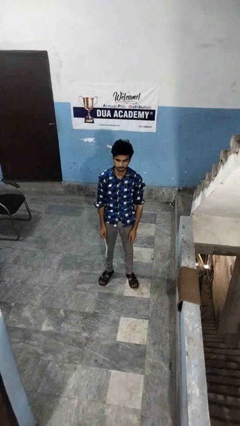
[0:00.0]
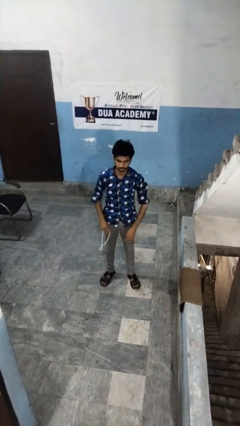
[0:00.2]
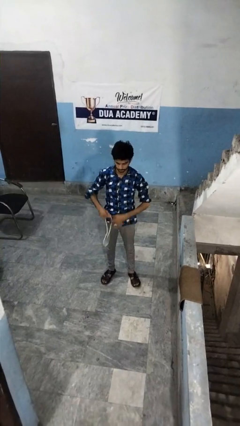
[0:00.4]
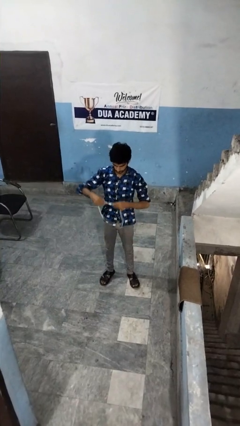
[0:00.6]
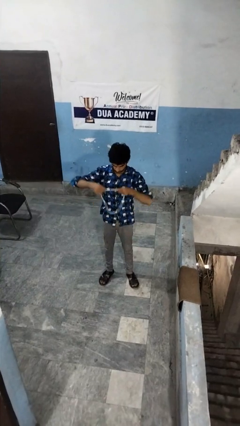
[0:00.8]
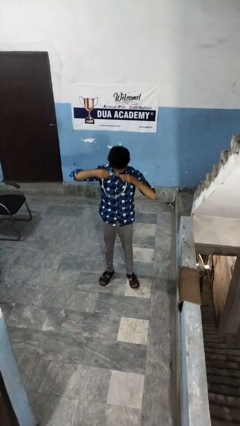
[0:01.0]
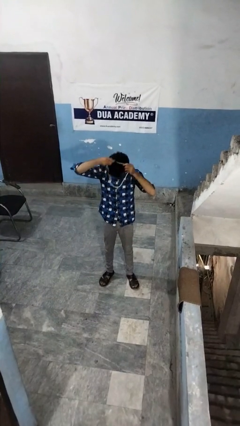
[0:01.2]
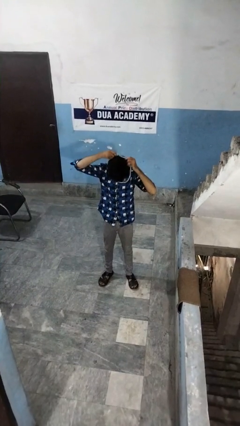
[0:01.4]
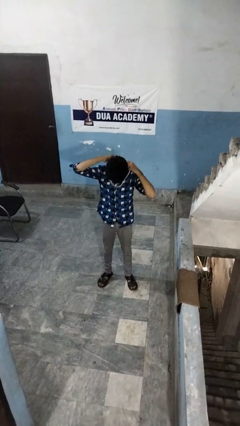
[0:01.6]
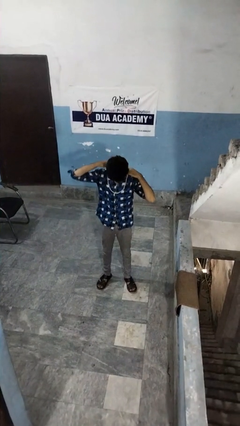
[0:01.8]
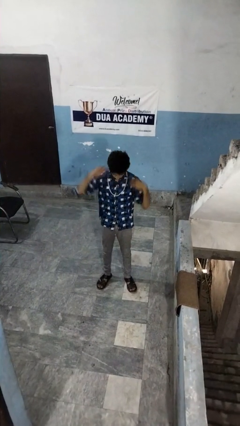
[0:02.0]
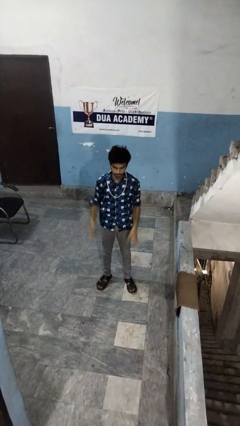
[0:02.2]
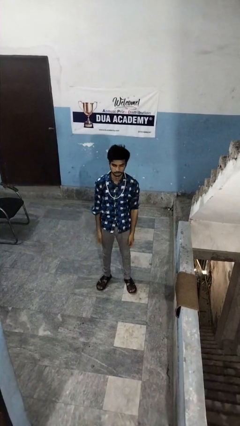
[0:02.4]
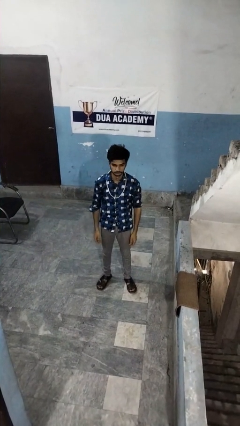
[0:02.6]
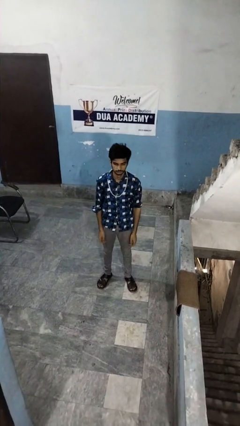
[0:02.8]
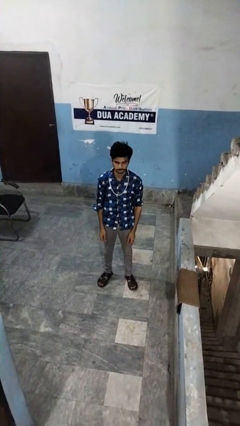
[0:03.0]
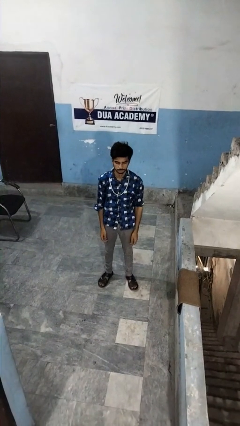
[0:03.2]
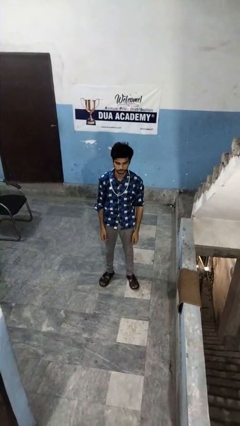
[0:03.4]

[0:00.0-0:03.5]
person puts on necklace

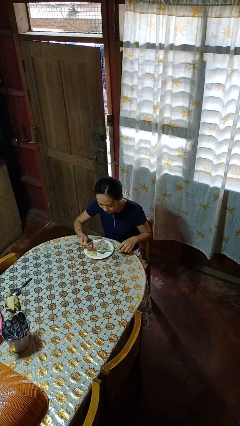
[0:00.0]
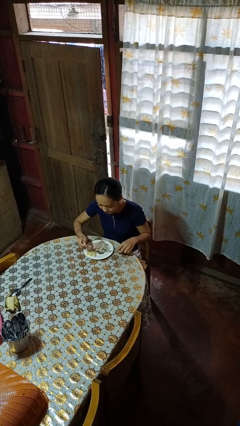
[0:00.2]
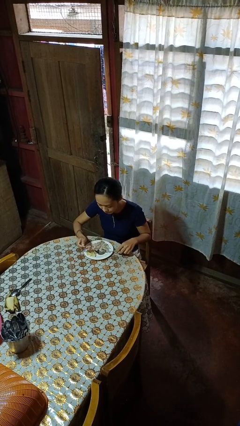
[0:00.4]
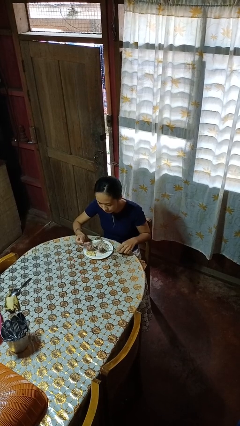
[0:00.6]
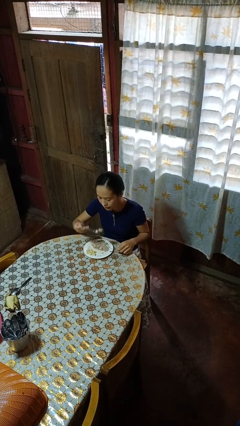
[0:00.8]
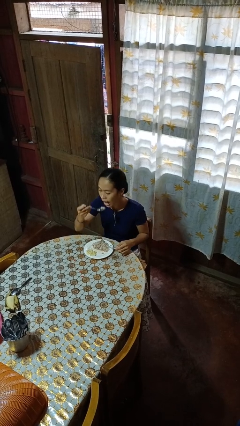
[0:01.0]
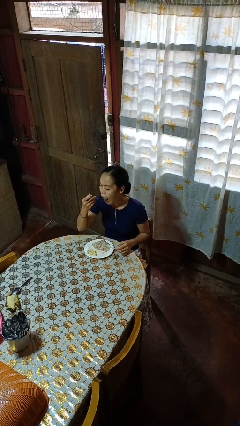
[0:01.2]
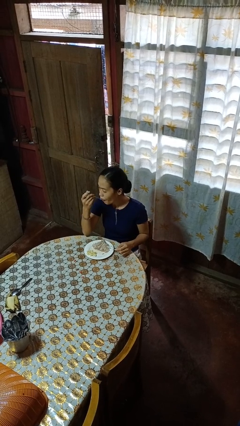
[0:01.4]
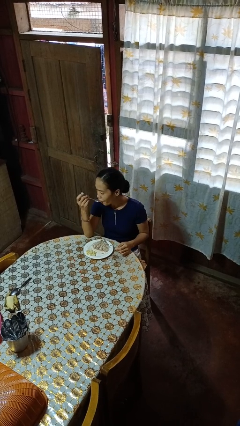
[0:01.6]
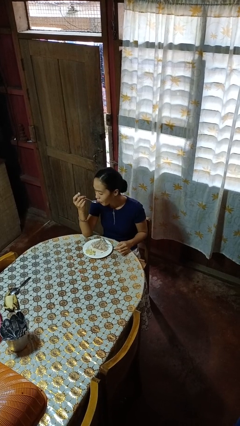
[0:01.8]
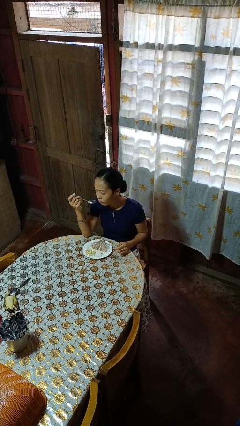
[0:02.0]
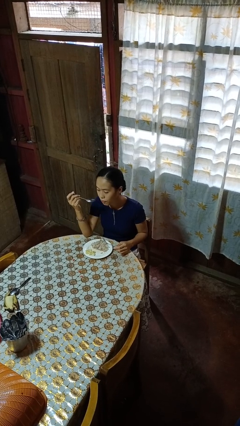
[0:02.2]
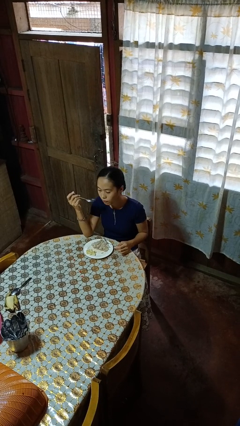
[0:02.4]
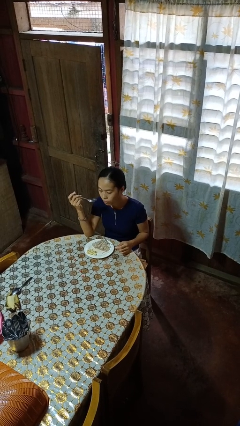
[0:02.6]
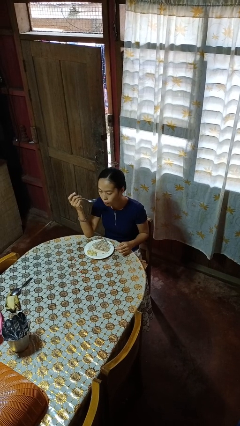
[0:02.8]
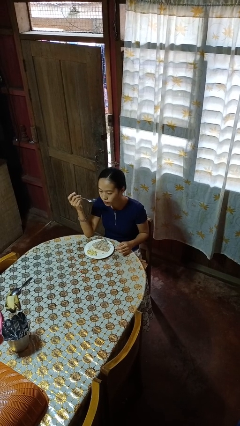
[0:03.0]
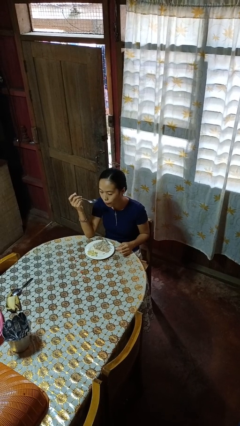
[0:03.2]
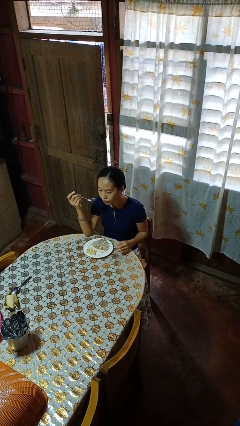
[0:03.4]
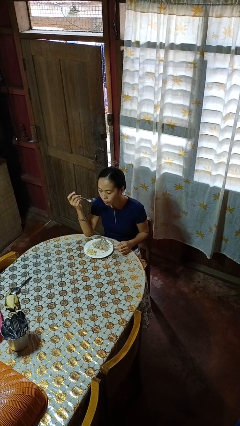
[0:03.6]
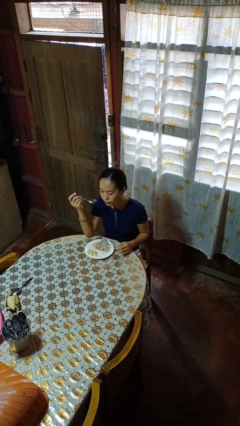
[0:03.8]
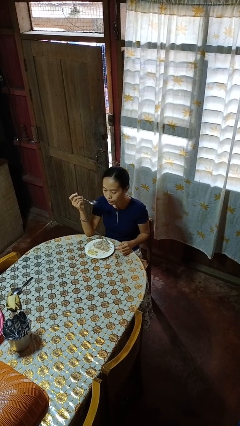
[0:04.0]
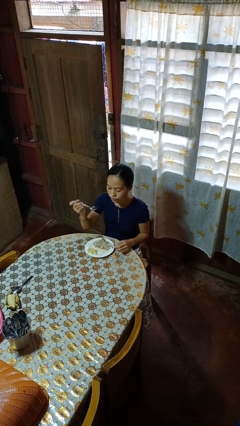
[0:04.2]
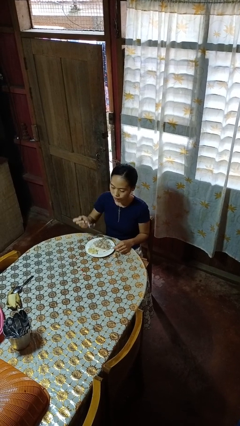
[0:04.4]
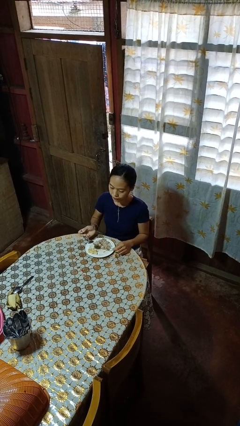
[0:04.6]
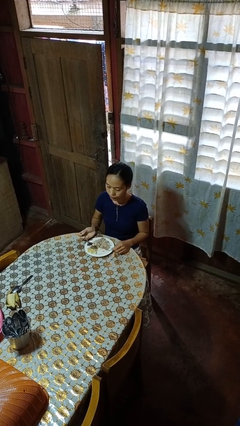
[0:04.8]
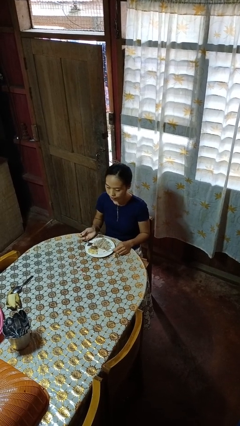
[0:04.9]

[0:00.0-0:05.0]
person eats with utensil

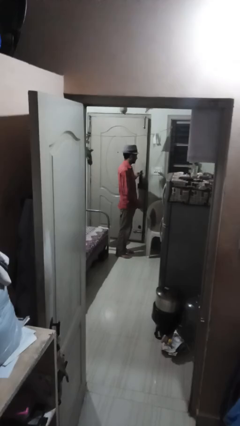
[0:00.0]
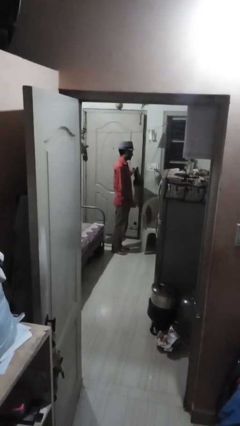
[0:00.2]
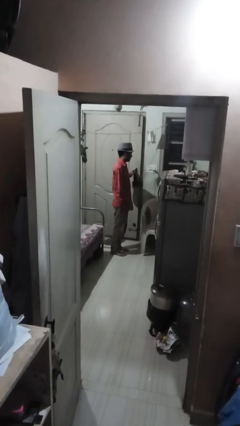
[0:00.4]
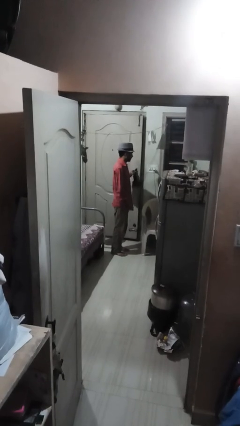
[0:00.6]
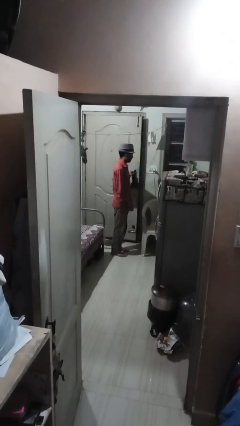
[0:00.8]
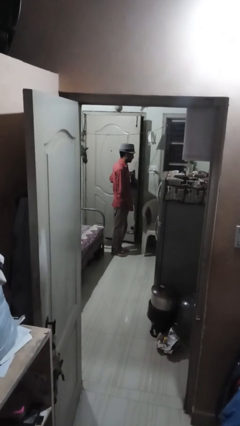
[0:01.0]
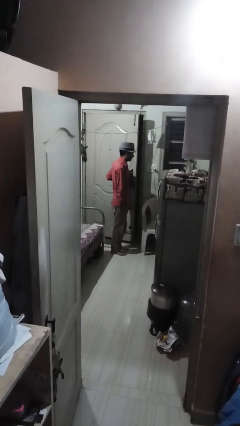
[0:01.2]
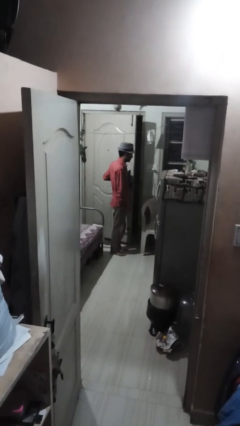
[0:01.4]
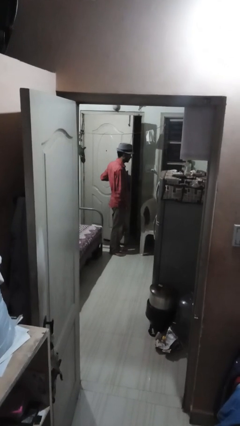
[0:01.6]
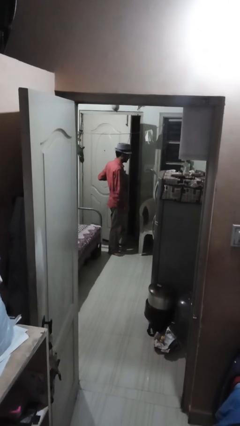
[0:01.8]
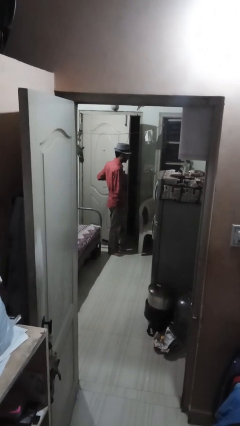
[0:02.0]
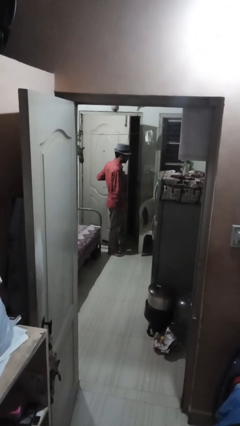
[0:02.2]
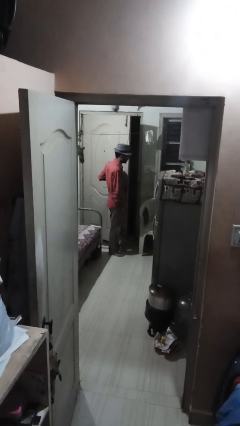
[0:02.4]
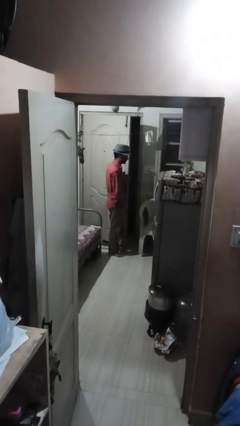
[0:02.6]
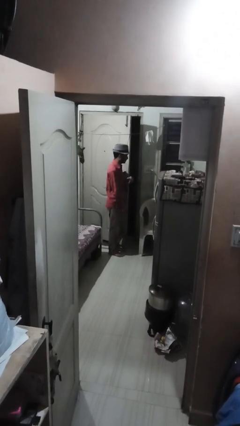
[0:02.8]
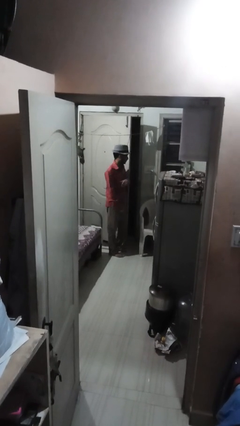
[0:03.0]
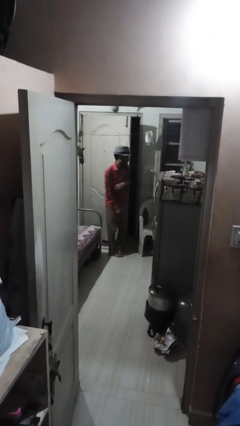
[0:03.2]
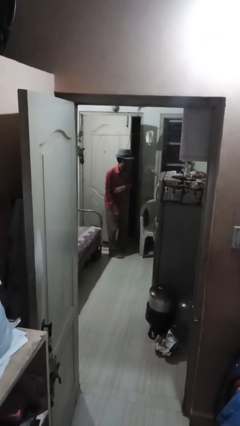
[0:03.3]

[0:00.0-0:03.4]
person opens facility door

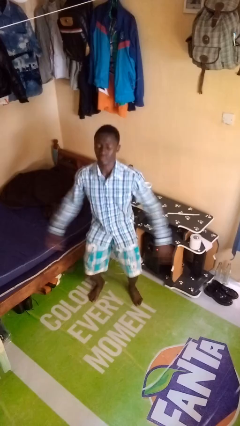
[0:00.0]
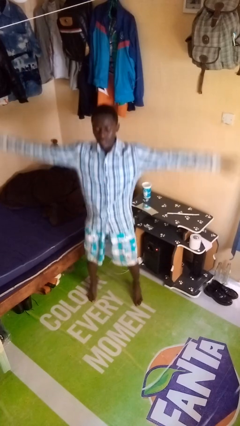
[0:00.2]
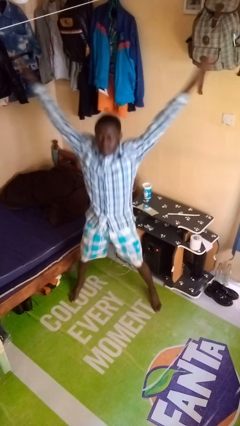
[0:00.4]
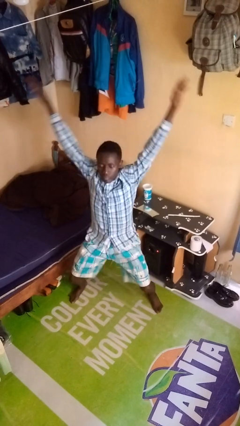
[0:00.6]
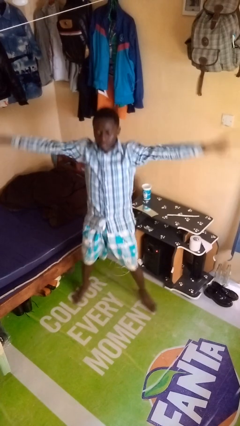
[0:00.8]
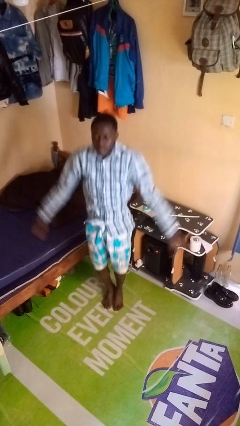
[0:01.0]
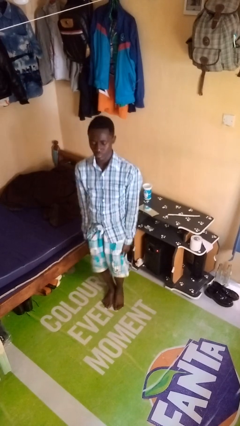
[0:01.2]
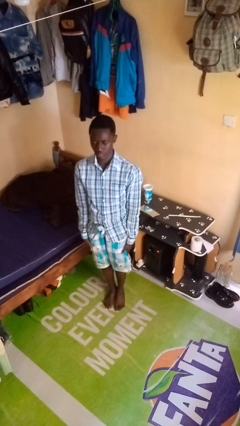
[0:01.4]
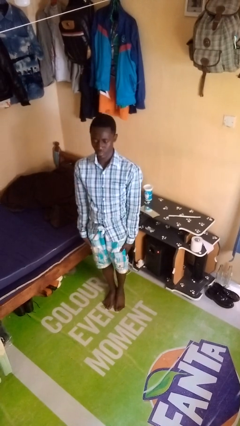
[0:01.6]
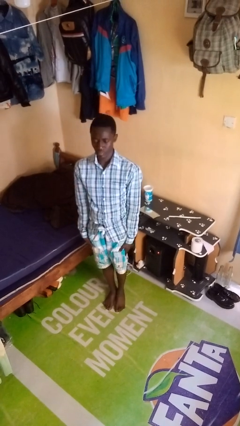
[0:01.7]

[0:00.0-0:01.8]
person exercises with jumping jacks

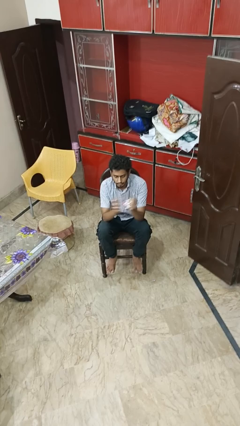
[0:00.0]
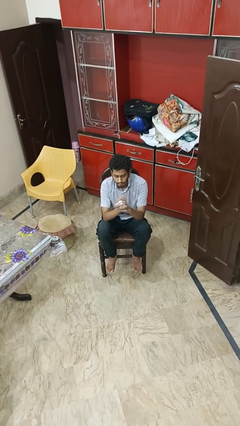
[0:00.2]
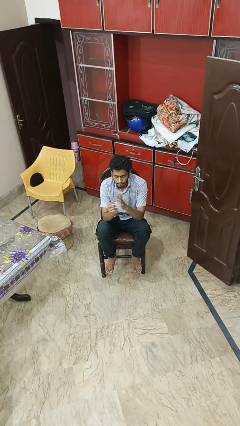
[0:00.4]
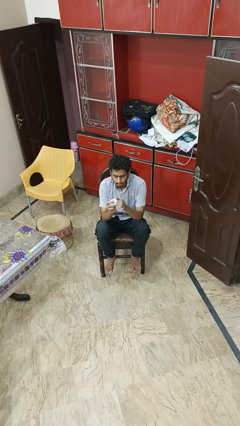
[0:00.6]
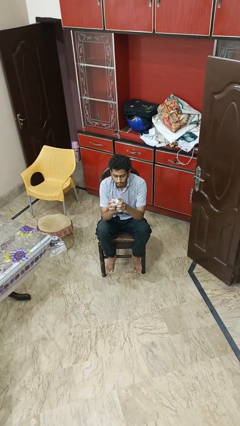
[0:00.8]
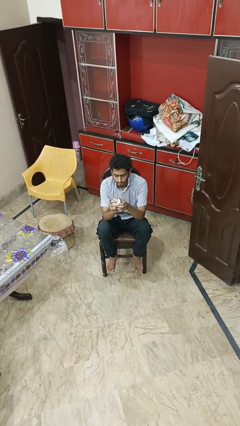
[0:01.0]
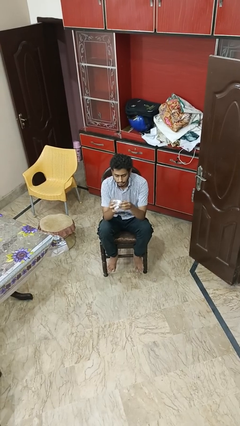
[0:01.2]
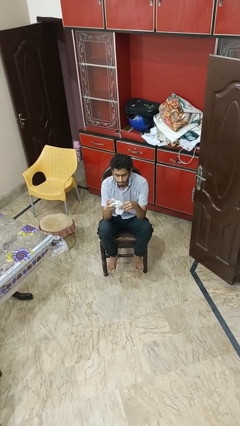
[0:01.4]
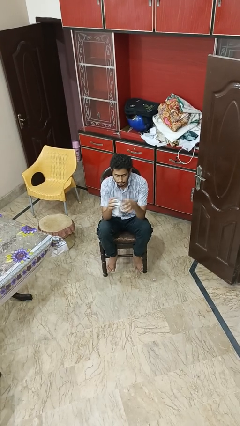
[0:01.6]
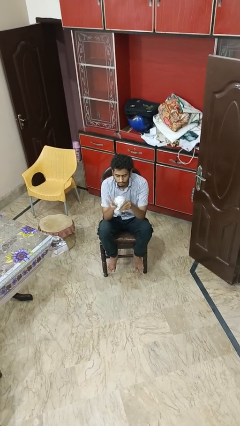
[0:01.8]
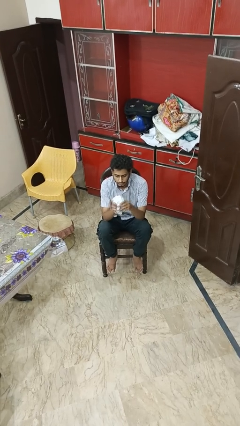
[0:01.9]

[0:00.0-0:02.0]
person crumples paper

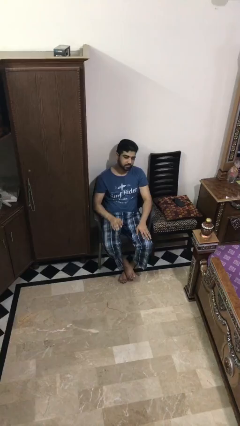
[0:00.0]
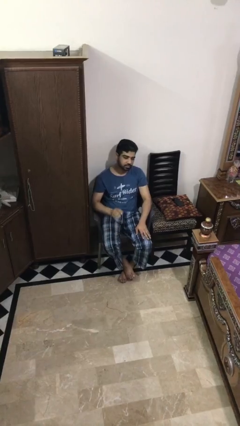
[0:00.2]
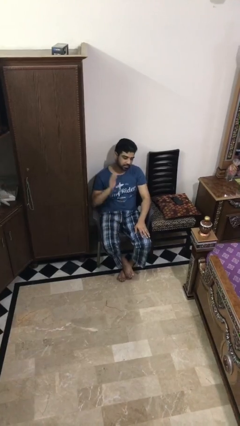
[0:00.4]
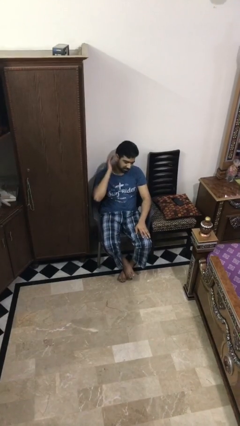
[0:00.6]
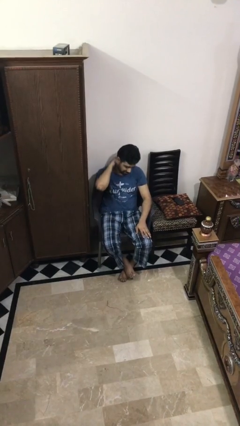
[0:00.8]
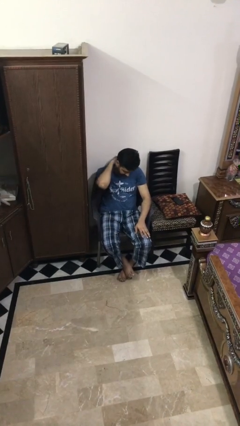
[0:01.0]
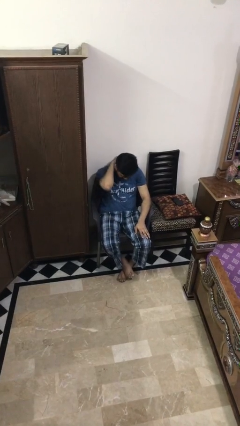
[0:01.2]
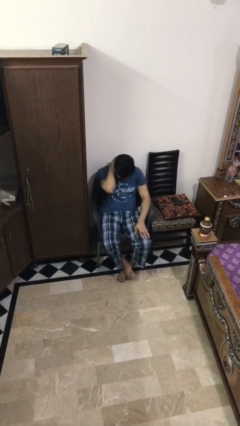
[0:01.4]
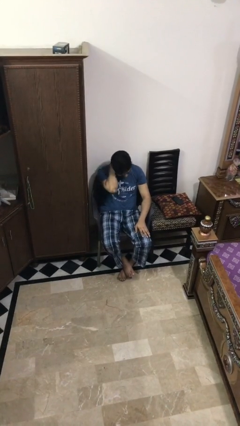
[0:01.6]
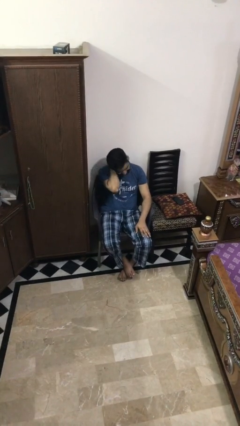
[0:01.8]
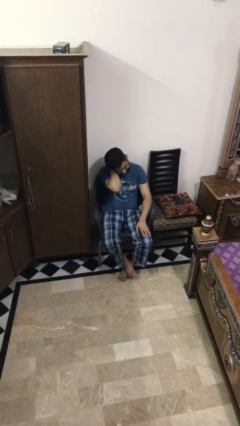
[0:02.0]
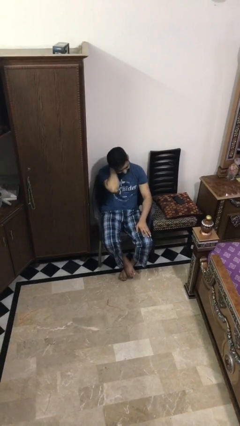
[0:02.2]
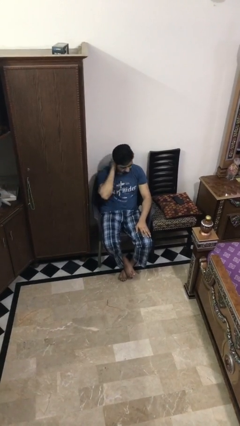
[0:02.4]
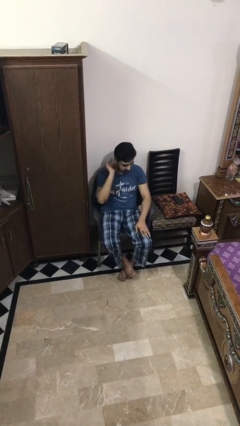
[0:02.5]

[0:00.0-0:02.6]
person rubs neck
